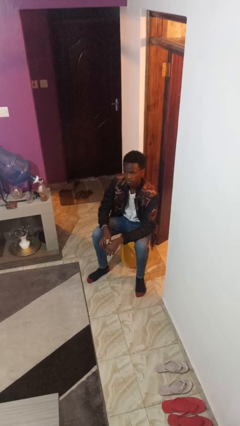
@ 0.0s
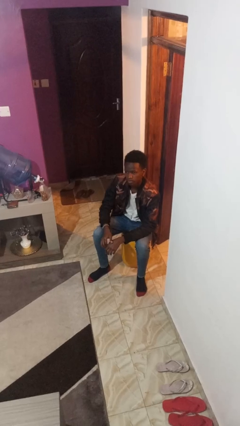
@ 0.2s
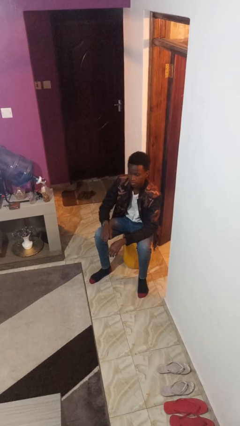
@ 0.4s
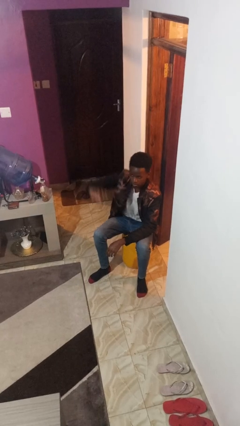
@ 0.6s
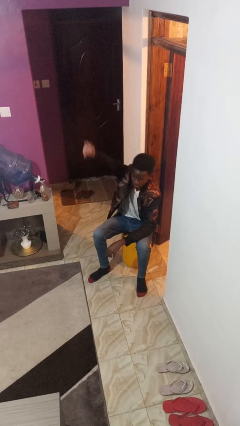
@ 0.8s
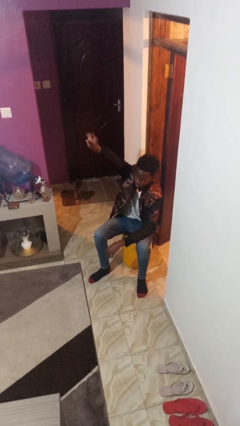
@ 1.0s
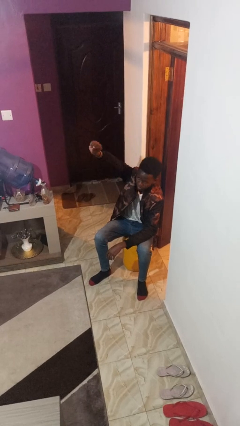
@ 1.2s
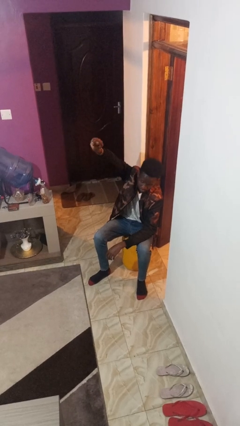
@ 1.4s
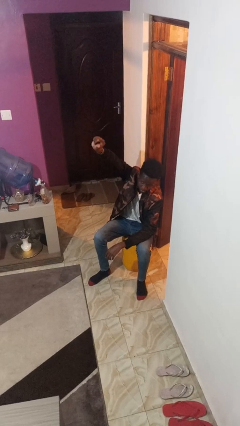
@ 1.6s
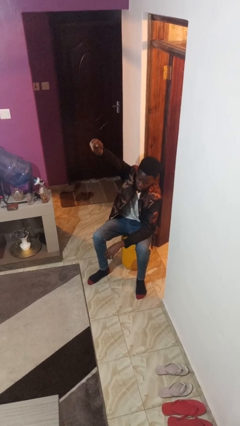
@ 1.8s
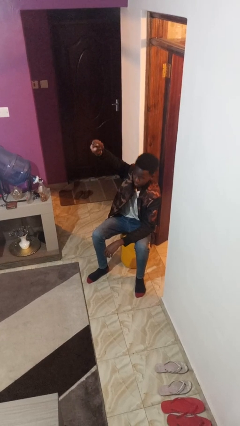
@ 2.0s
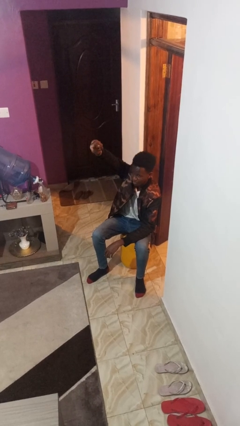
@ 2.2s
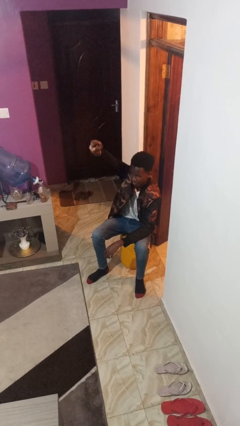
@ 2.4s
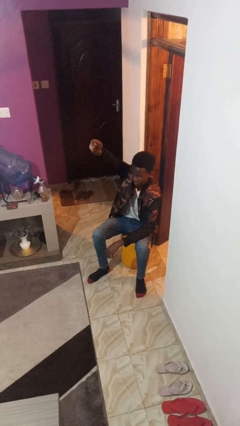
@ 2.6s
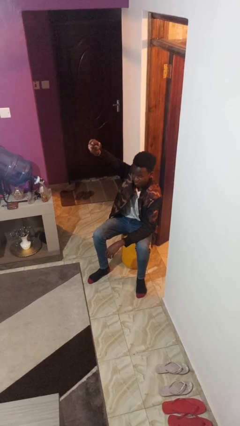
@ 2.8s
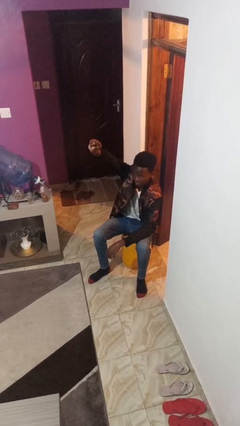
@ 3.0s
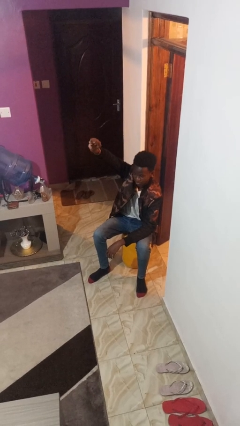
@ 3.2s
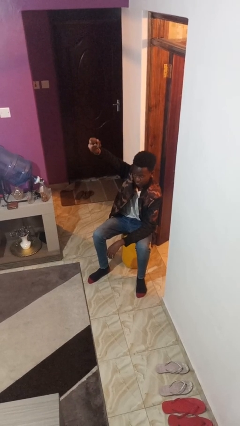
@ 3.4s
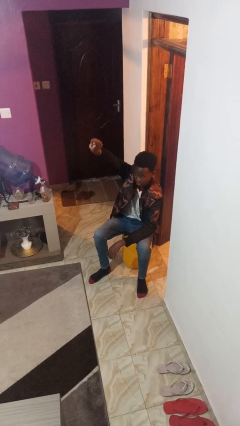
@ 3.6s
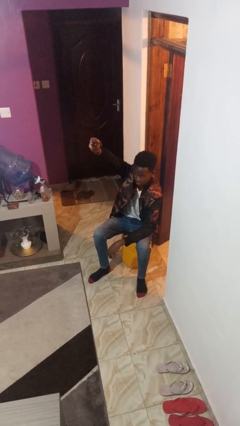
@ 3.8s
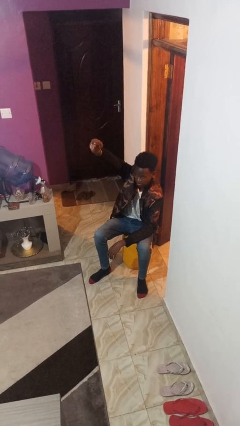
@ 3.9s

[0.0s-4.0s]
person gestures raise hand

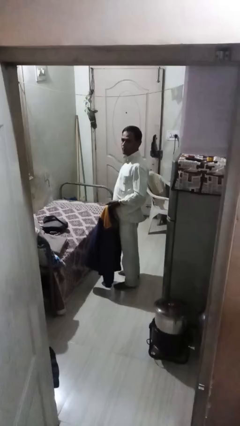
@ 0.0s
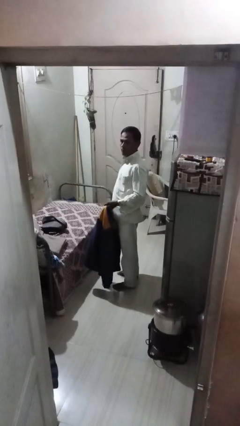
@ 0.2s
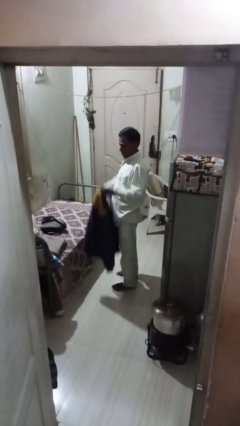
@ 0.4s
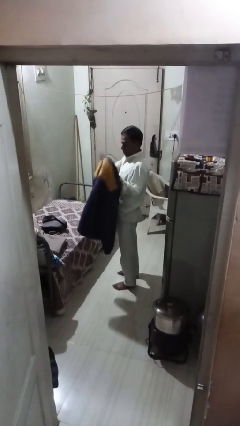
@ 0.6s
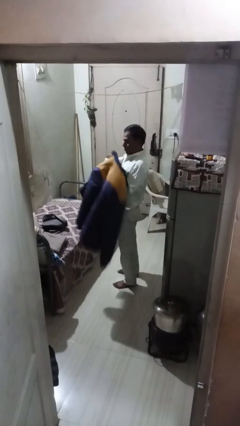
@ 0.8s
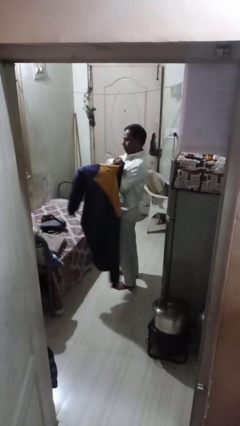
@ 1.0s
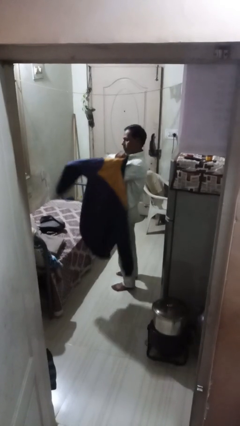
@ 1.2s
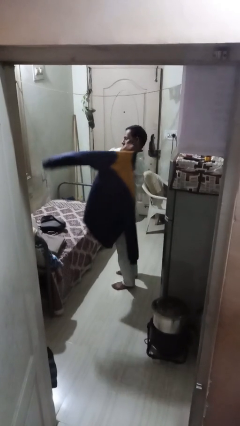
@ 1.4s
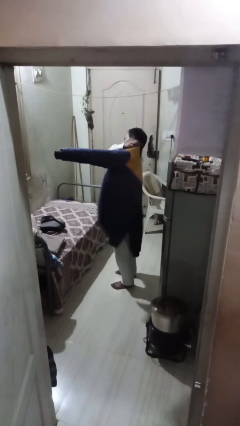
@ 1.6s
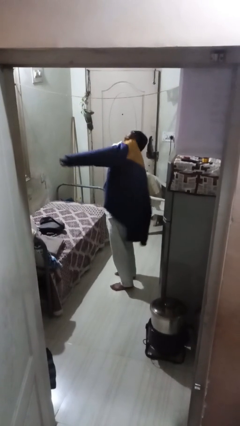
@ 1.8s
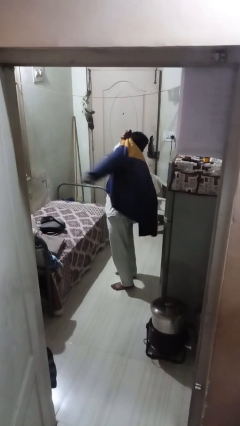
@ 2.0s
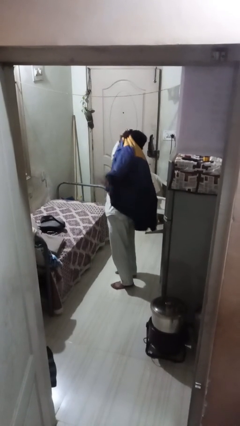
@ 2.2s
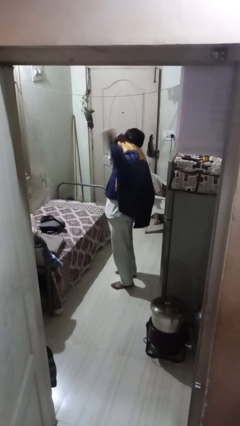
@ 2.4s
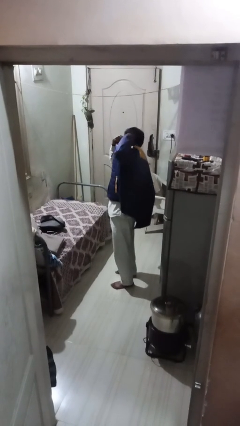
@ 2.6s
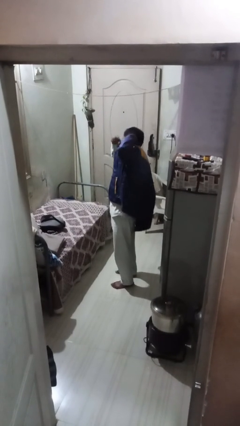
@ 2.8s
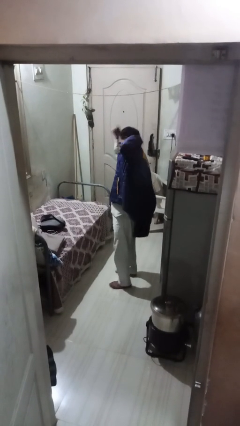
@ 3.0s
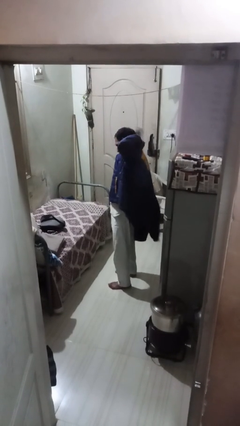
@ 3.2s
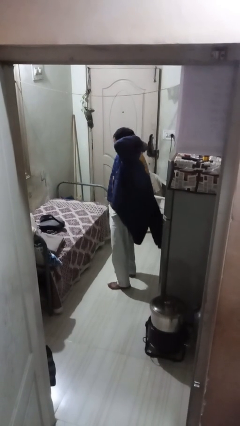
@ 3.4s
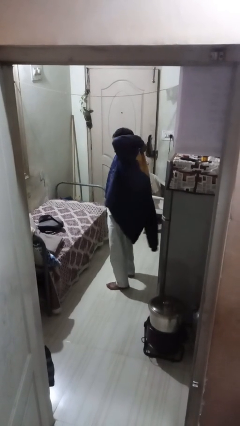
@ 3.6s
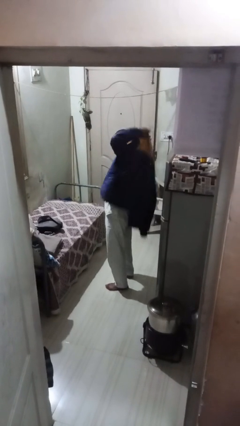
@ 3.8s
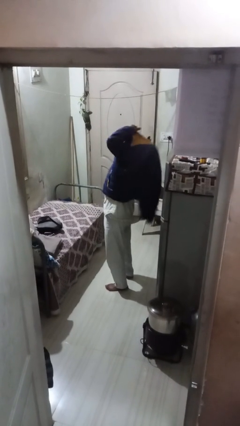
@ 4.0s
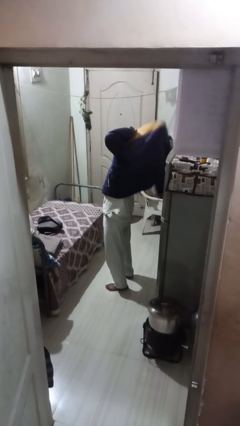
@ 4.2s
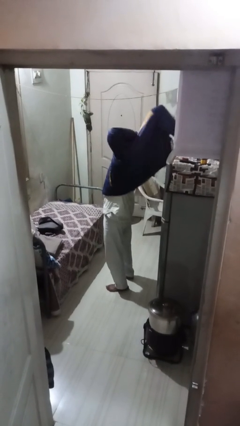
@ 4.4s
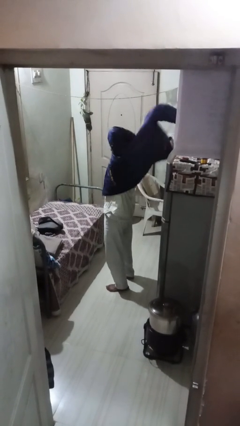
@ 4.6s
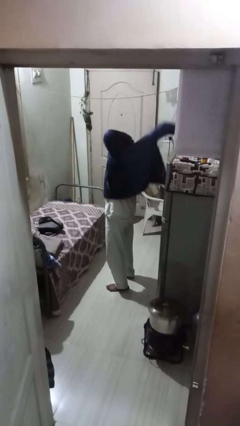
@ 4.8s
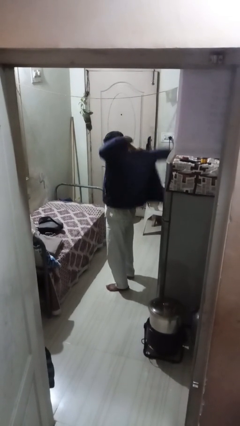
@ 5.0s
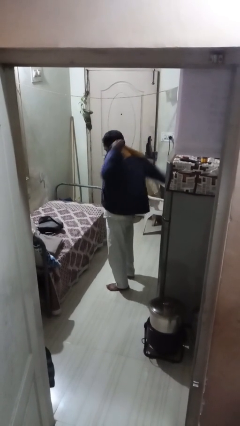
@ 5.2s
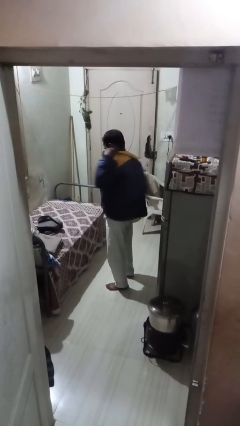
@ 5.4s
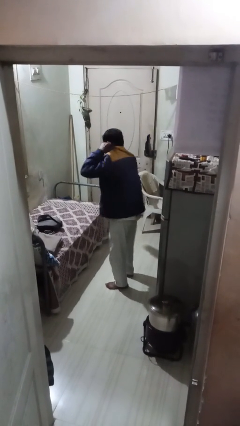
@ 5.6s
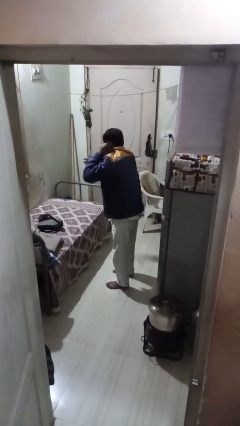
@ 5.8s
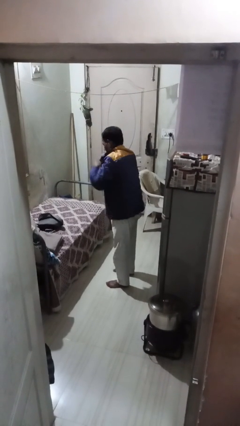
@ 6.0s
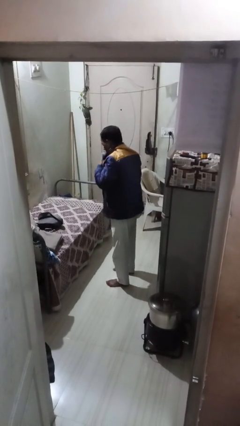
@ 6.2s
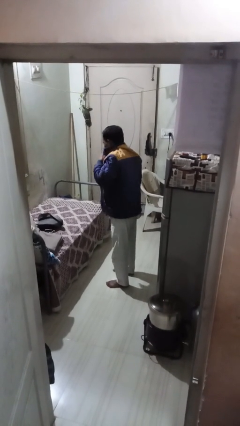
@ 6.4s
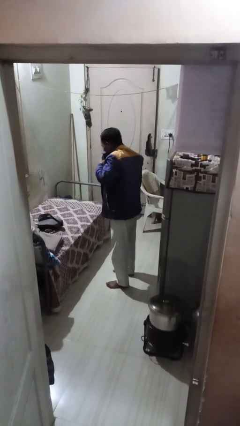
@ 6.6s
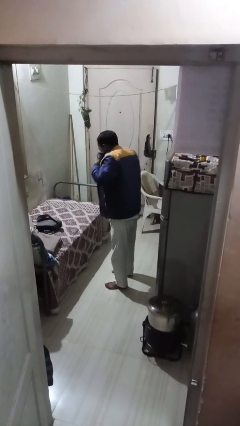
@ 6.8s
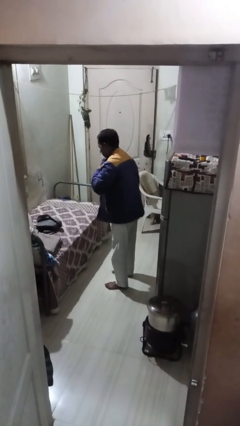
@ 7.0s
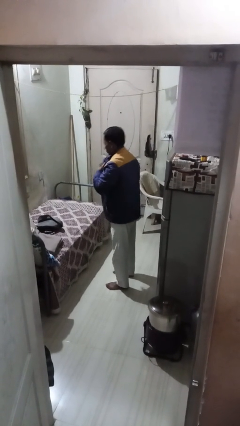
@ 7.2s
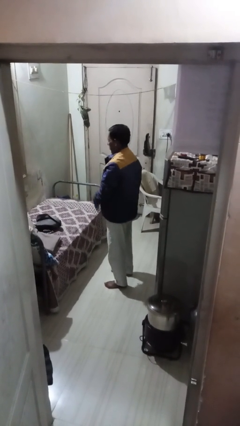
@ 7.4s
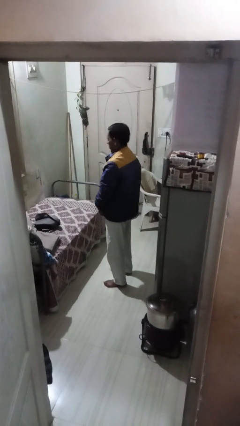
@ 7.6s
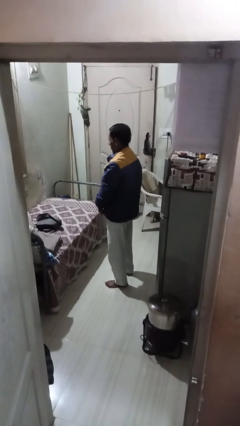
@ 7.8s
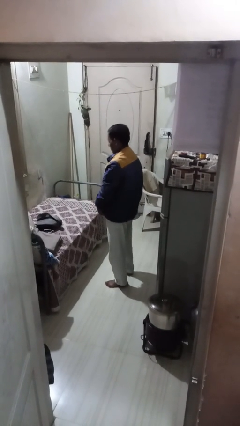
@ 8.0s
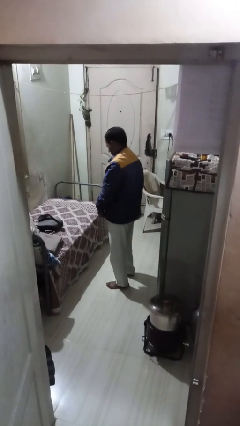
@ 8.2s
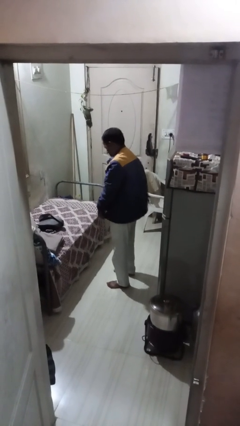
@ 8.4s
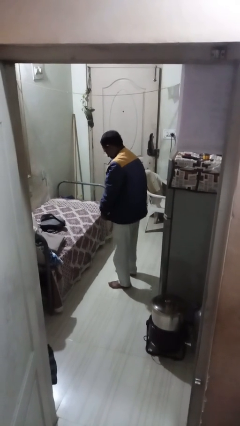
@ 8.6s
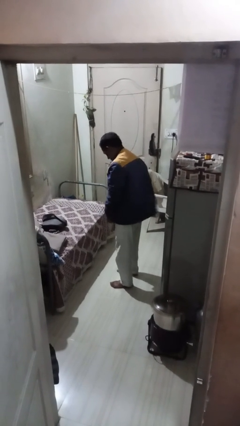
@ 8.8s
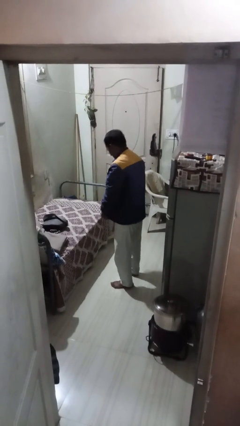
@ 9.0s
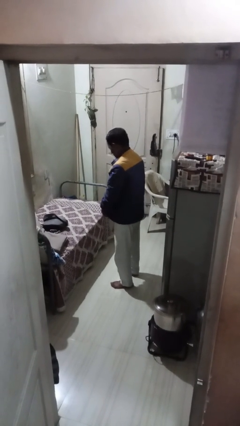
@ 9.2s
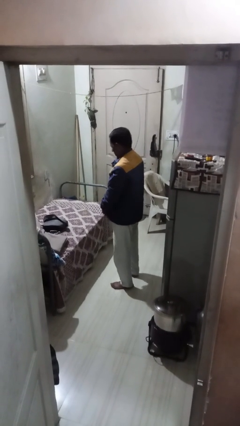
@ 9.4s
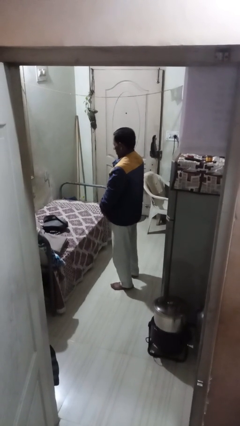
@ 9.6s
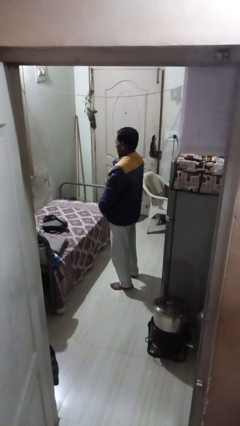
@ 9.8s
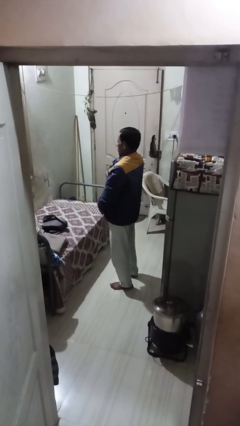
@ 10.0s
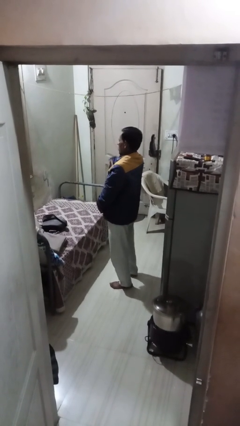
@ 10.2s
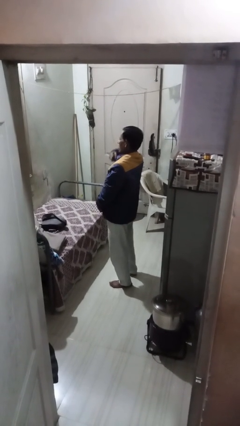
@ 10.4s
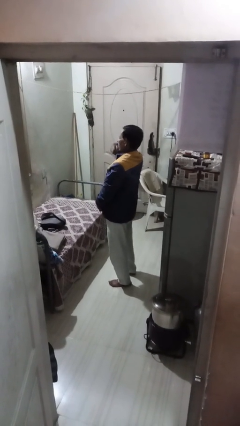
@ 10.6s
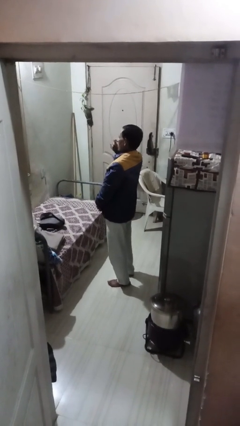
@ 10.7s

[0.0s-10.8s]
person puts on jacket

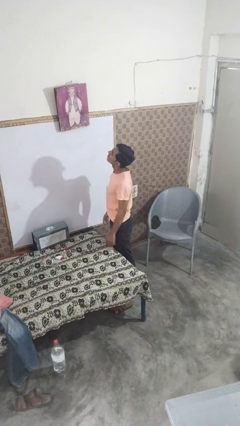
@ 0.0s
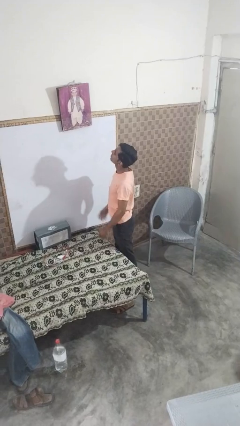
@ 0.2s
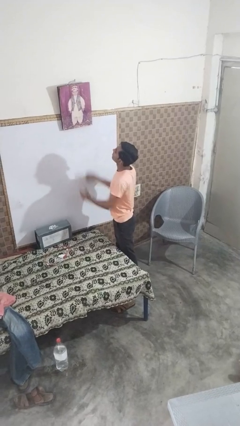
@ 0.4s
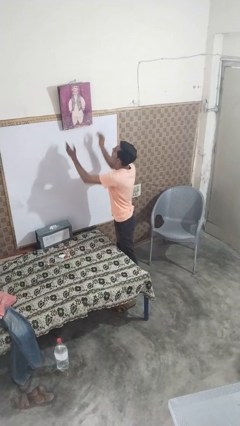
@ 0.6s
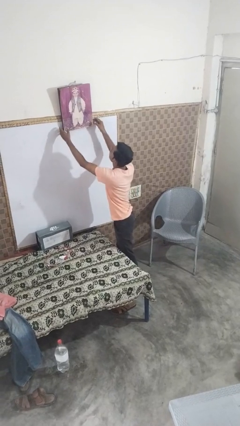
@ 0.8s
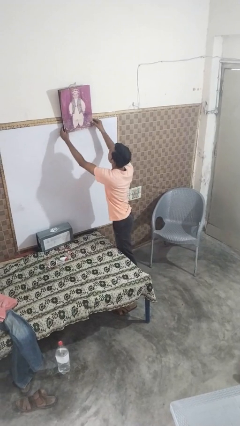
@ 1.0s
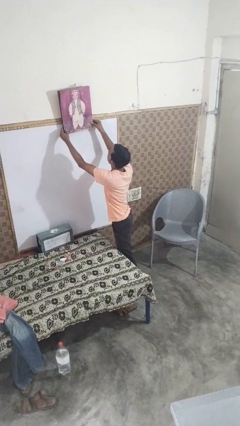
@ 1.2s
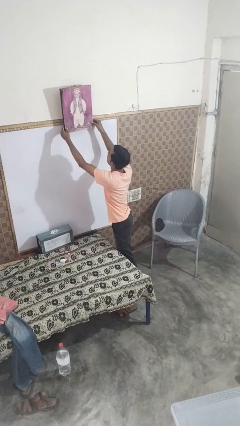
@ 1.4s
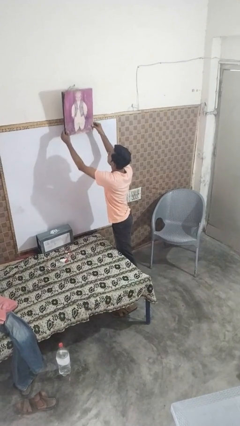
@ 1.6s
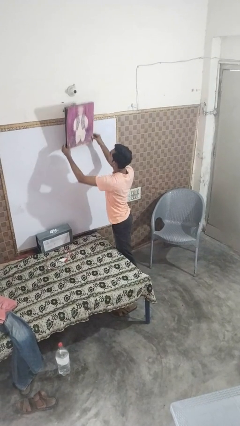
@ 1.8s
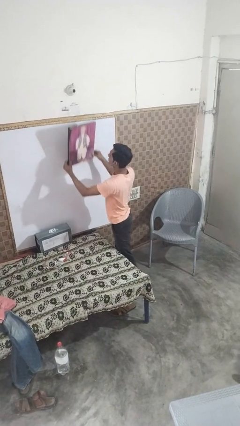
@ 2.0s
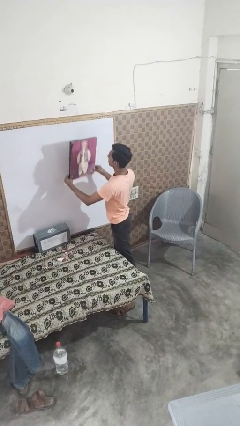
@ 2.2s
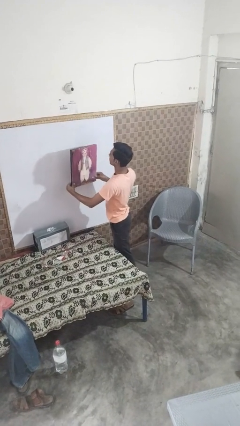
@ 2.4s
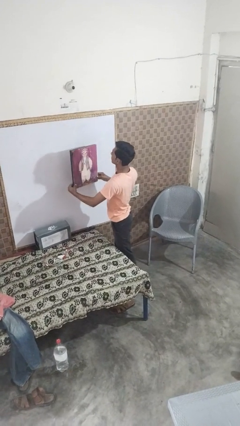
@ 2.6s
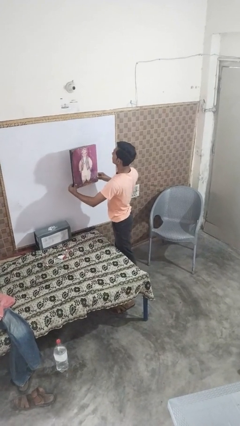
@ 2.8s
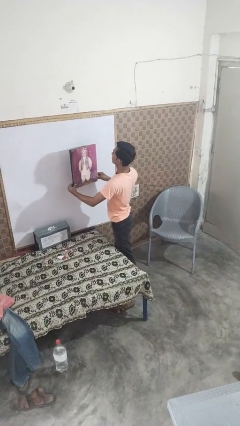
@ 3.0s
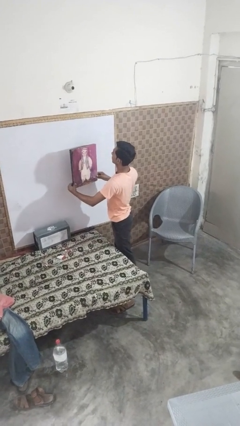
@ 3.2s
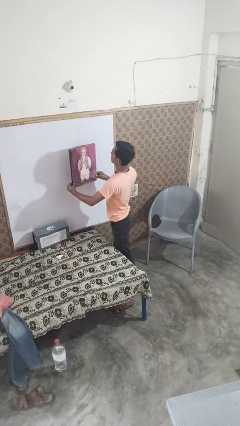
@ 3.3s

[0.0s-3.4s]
person takes down picture frame
